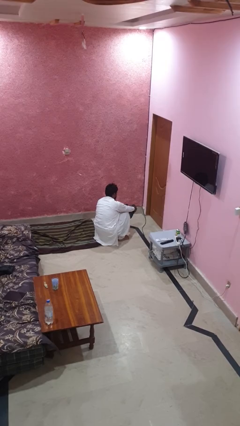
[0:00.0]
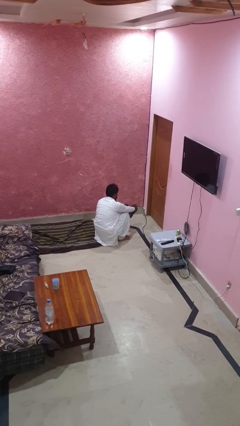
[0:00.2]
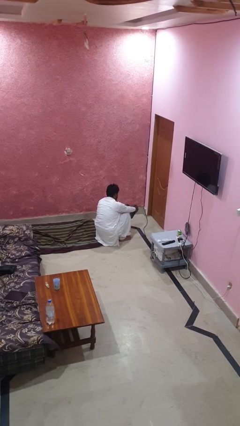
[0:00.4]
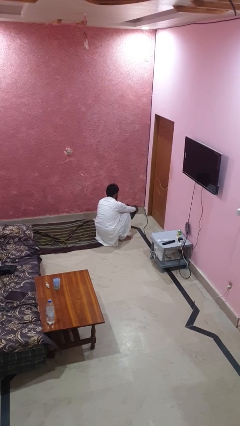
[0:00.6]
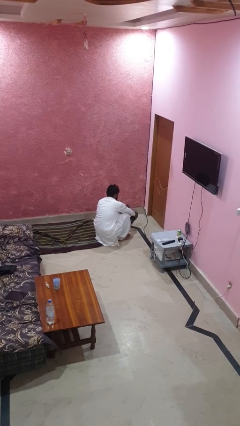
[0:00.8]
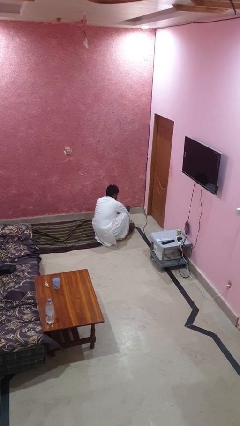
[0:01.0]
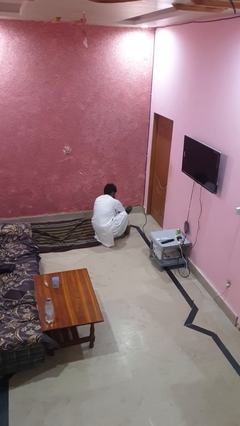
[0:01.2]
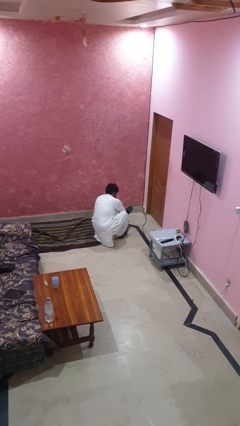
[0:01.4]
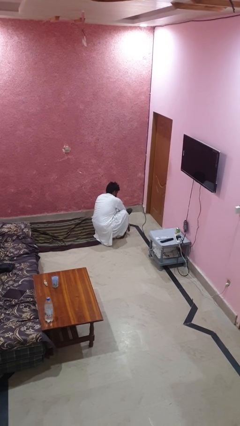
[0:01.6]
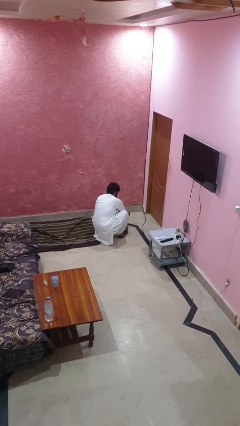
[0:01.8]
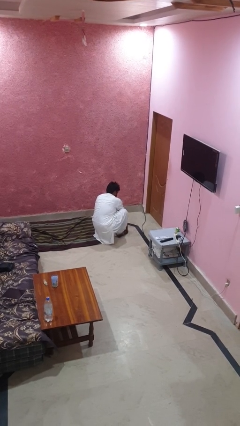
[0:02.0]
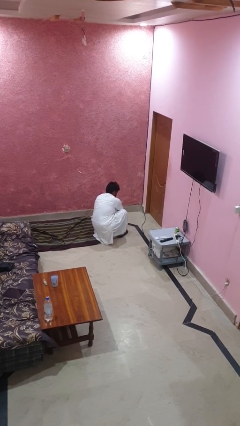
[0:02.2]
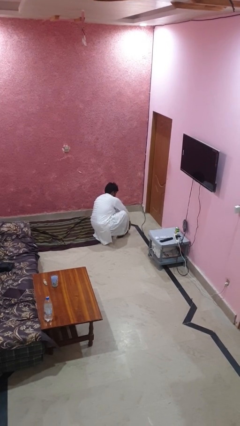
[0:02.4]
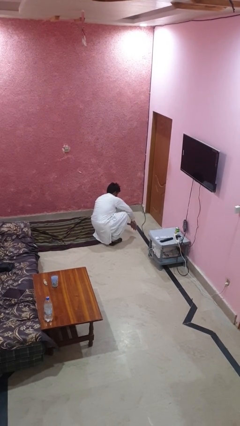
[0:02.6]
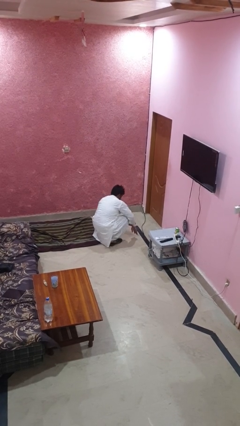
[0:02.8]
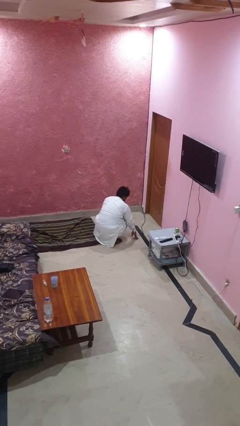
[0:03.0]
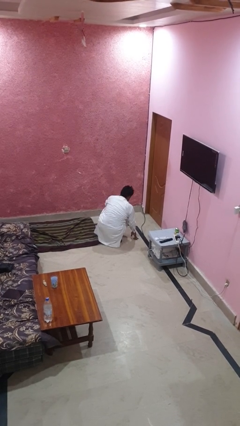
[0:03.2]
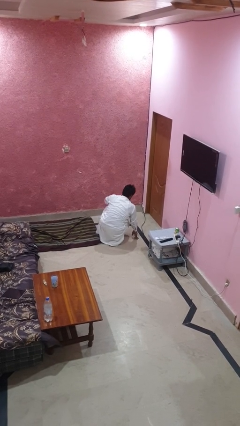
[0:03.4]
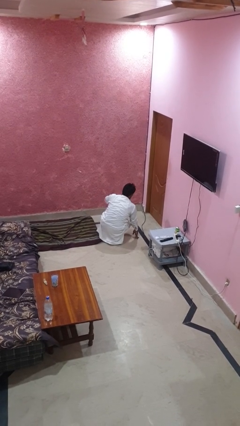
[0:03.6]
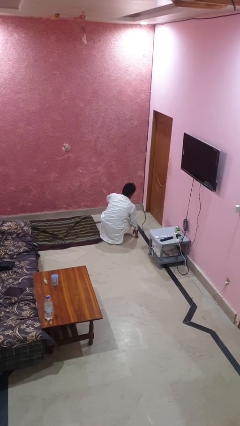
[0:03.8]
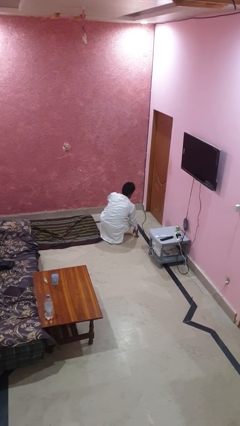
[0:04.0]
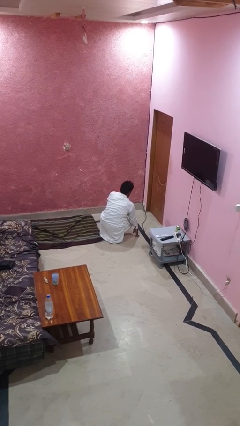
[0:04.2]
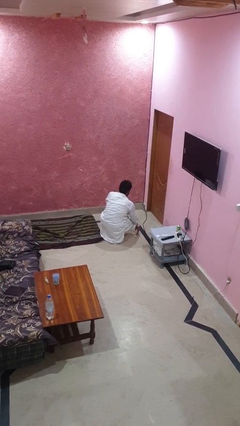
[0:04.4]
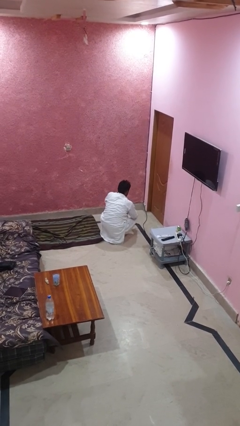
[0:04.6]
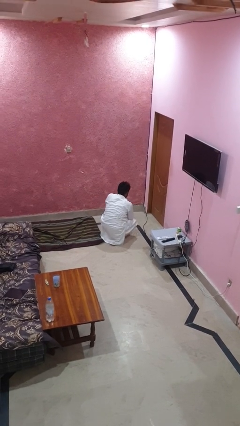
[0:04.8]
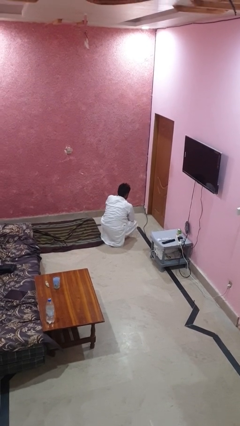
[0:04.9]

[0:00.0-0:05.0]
person puts on shoes

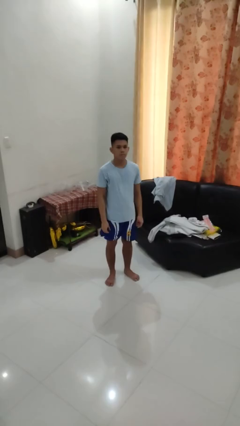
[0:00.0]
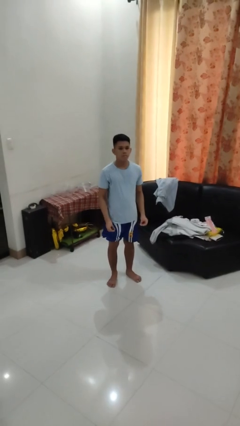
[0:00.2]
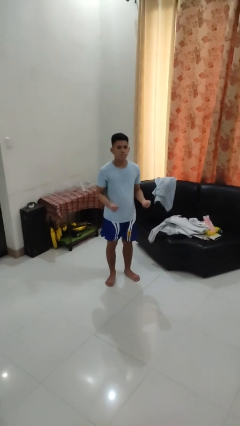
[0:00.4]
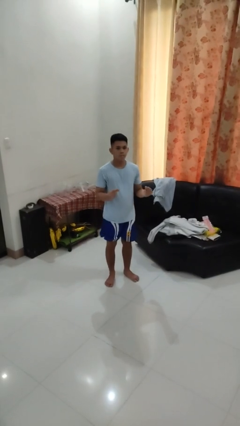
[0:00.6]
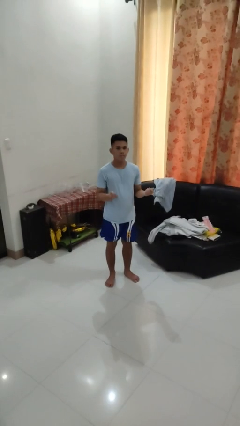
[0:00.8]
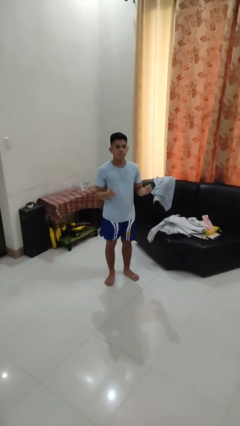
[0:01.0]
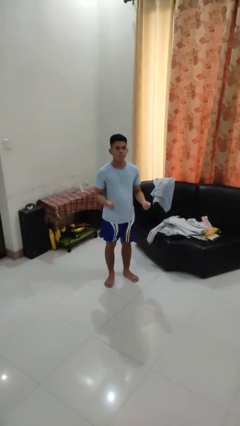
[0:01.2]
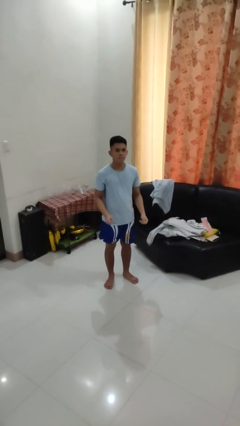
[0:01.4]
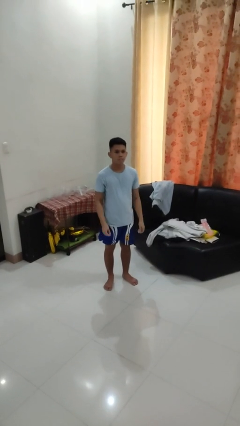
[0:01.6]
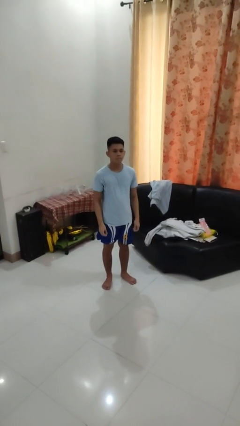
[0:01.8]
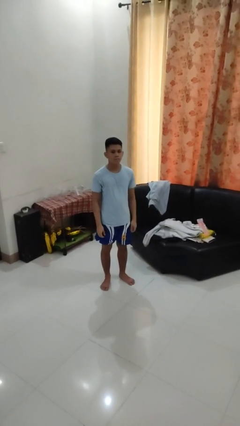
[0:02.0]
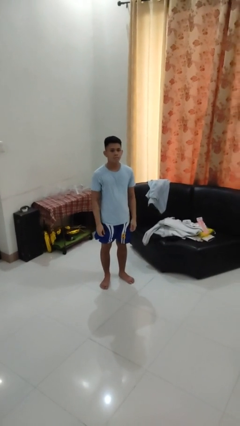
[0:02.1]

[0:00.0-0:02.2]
person snaps fingers

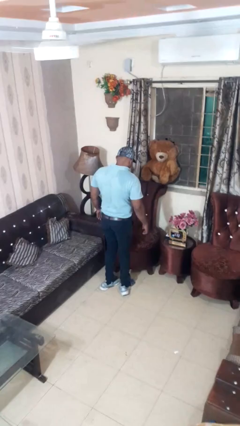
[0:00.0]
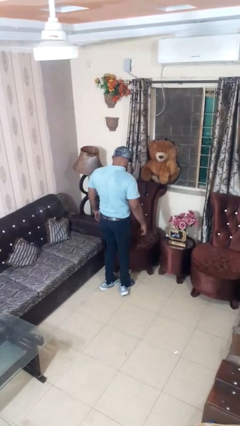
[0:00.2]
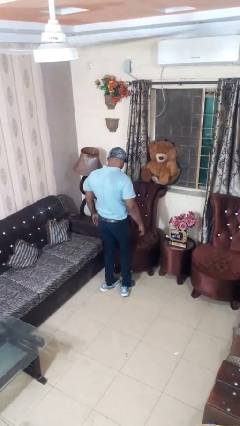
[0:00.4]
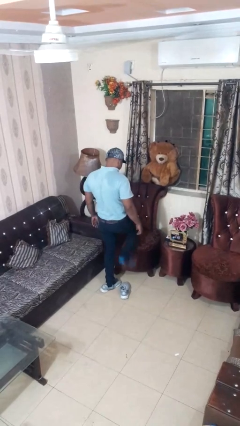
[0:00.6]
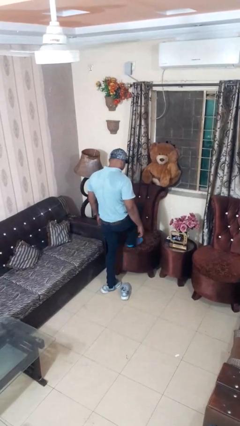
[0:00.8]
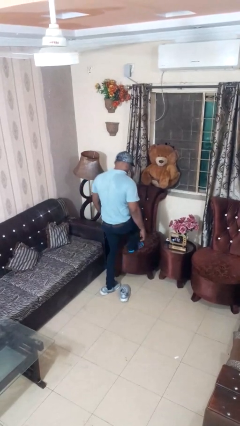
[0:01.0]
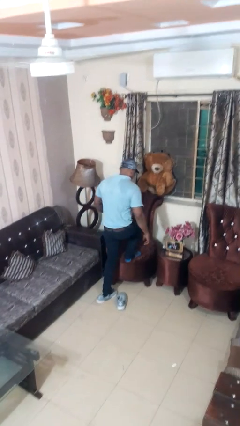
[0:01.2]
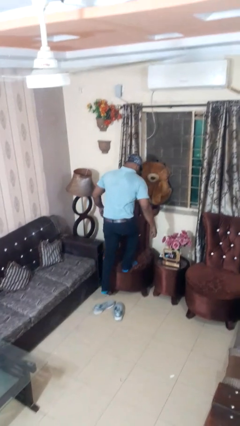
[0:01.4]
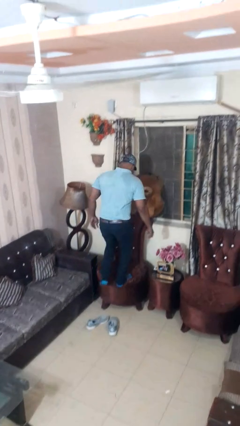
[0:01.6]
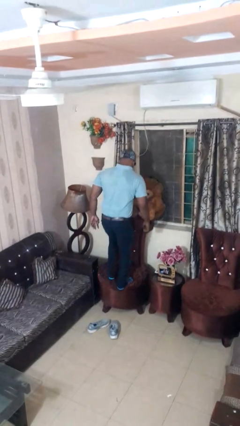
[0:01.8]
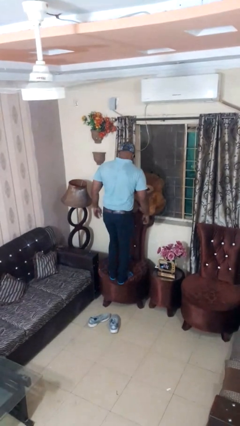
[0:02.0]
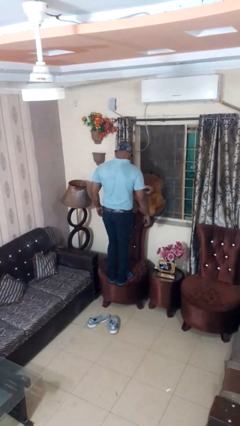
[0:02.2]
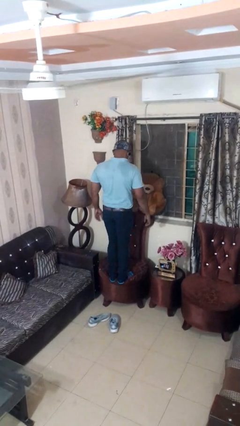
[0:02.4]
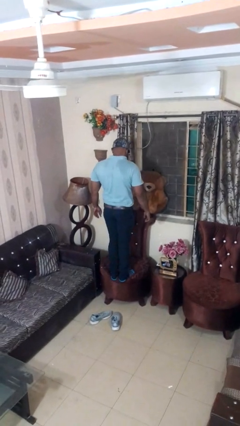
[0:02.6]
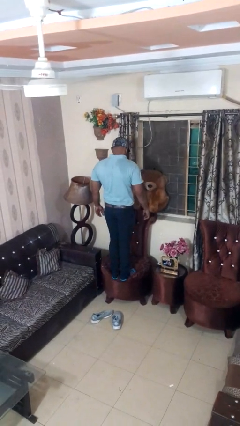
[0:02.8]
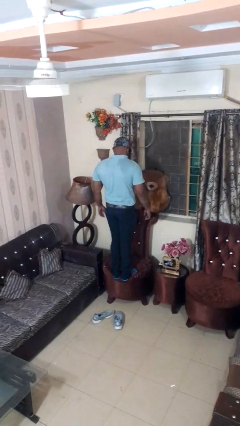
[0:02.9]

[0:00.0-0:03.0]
person climbs on chair

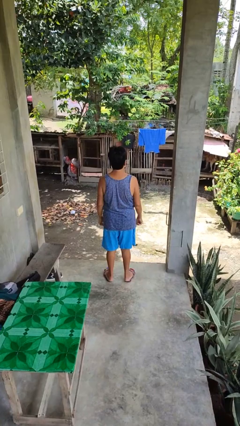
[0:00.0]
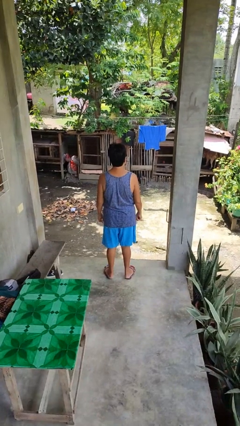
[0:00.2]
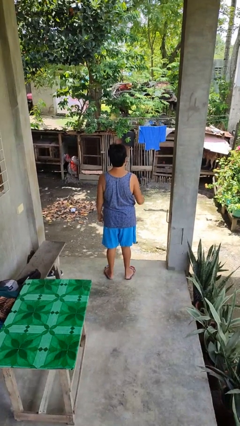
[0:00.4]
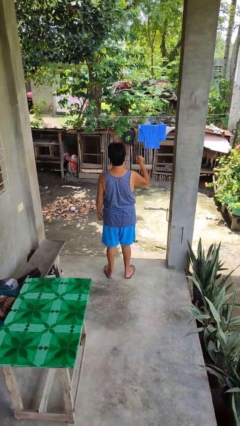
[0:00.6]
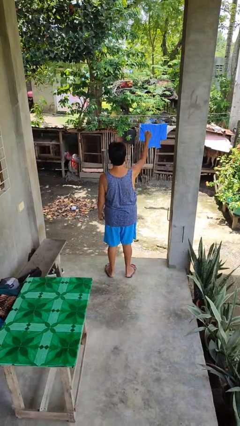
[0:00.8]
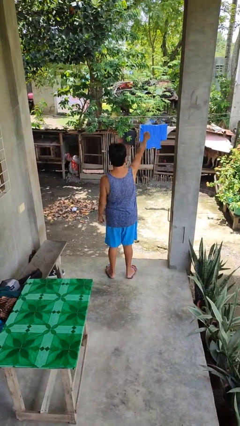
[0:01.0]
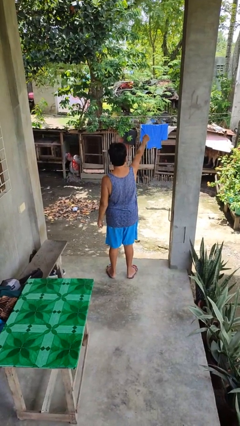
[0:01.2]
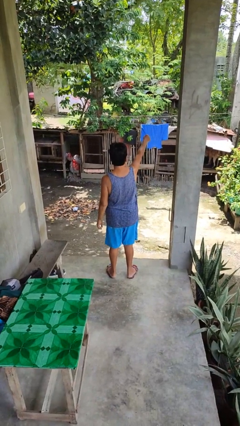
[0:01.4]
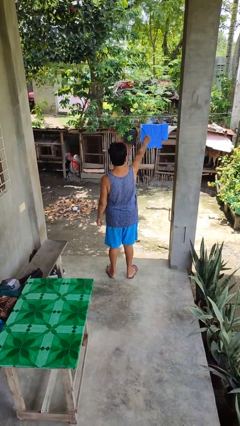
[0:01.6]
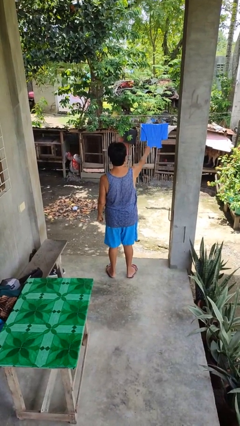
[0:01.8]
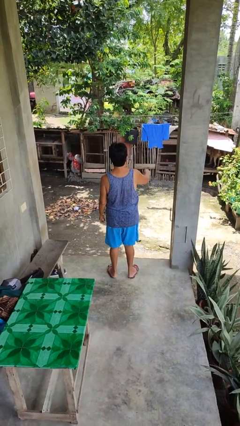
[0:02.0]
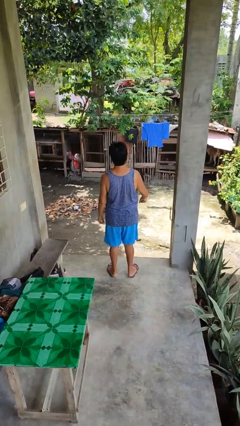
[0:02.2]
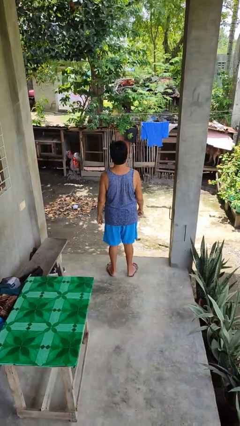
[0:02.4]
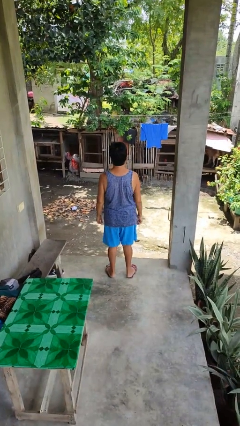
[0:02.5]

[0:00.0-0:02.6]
person punches

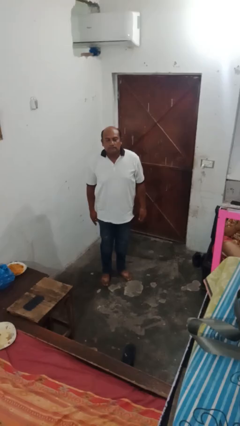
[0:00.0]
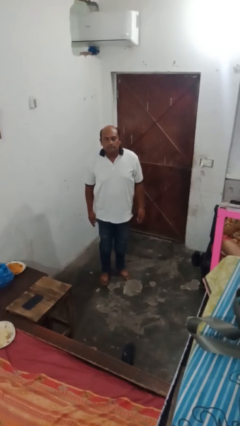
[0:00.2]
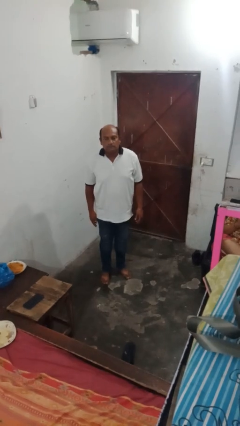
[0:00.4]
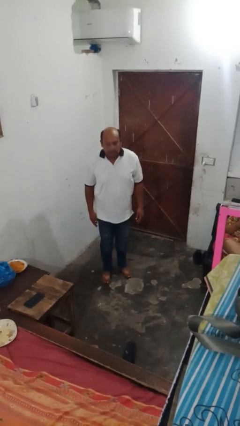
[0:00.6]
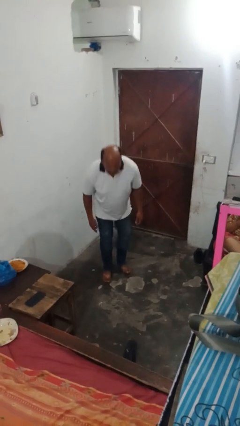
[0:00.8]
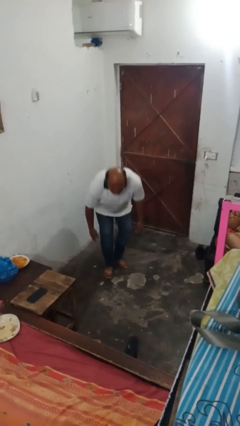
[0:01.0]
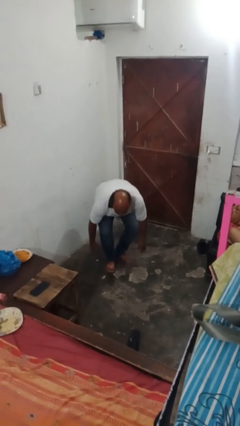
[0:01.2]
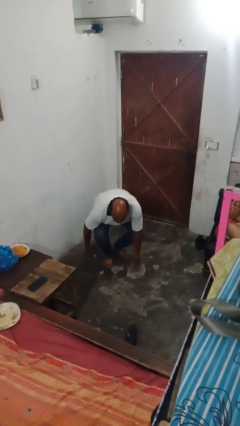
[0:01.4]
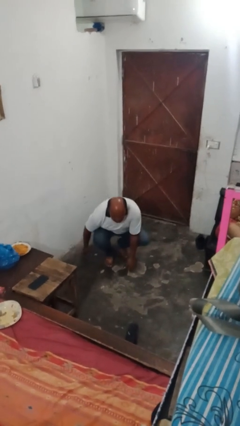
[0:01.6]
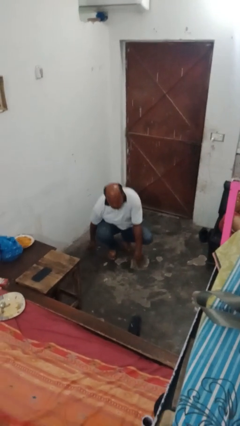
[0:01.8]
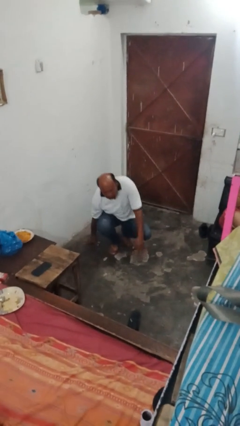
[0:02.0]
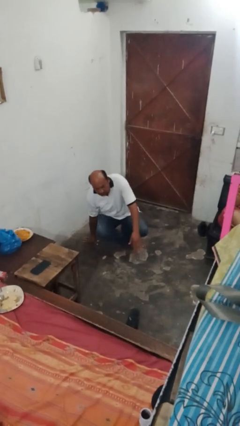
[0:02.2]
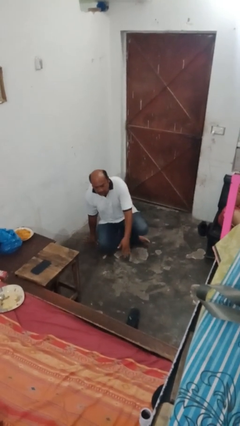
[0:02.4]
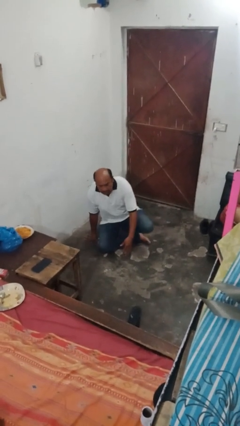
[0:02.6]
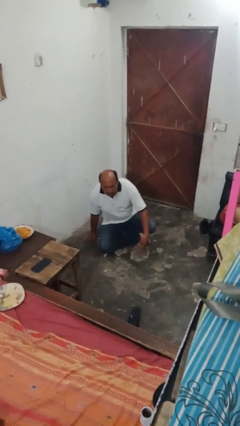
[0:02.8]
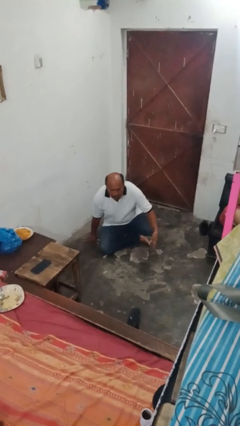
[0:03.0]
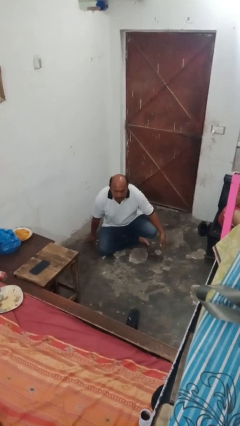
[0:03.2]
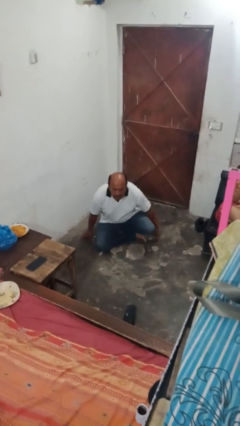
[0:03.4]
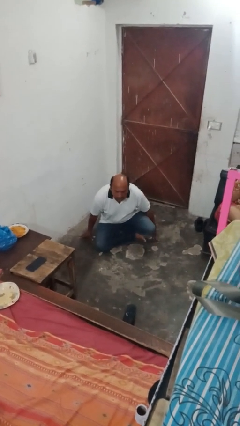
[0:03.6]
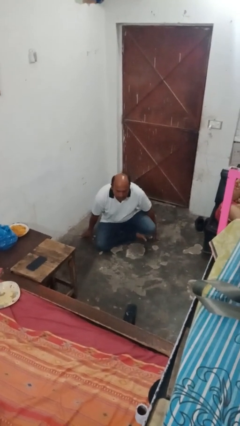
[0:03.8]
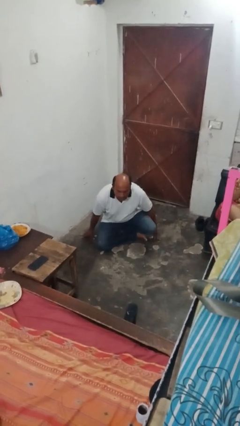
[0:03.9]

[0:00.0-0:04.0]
person sits crisscross

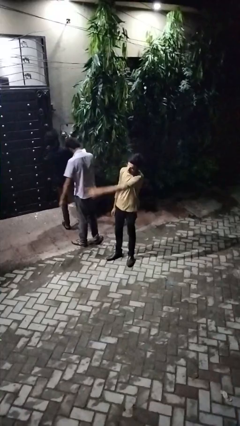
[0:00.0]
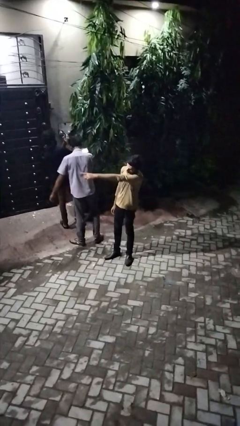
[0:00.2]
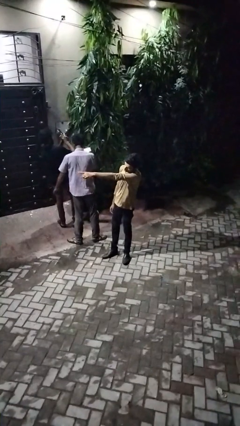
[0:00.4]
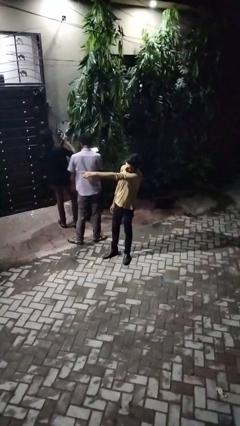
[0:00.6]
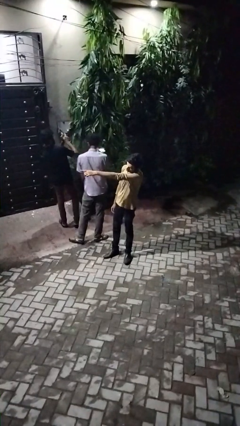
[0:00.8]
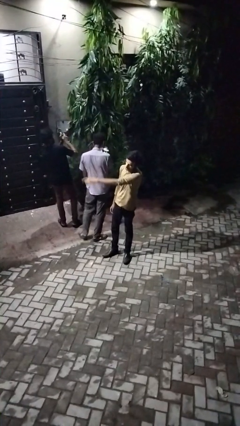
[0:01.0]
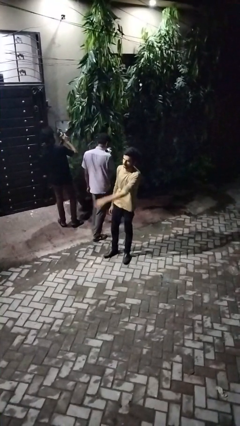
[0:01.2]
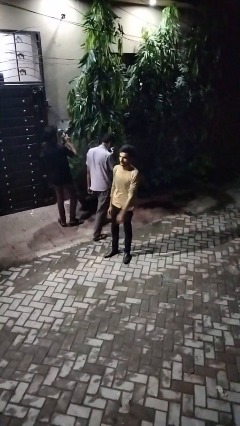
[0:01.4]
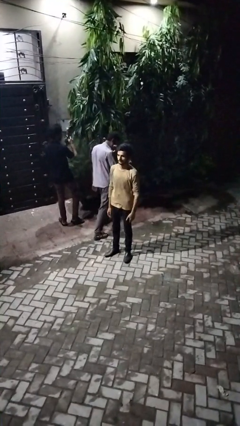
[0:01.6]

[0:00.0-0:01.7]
person points at person
